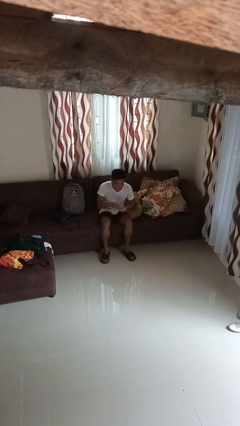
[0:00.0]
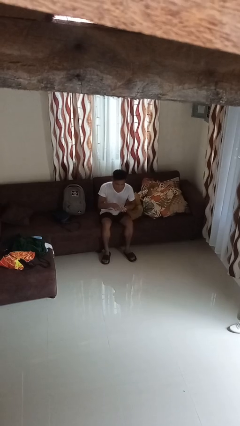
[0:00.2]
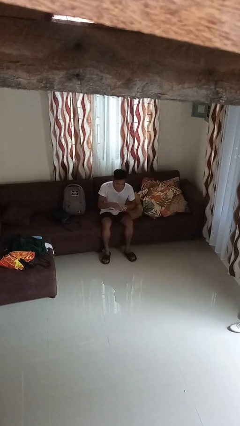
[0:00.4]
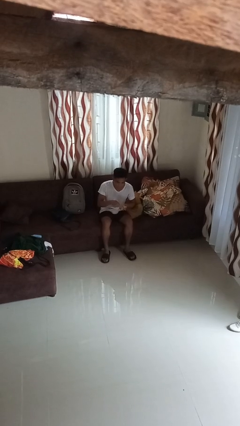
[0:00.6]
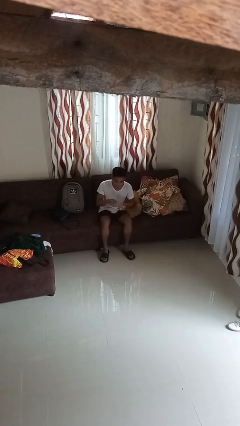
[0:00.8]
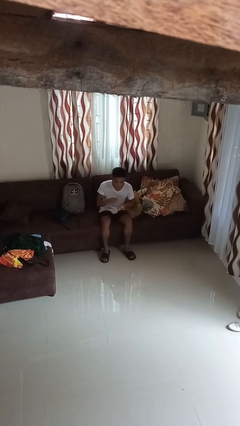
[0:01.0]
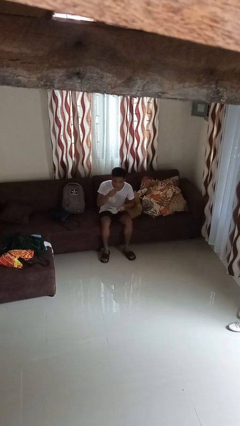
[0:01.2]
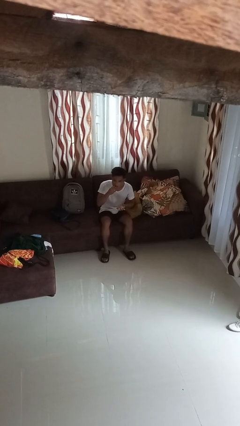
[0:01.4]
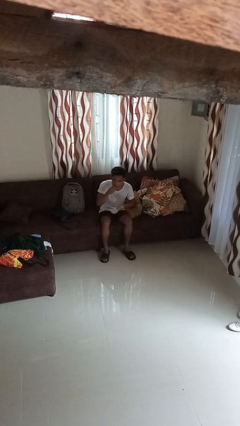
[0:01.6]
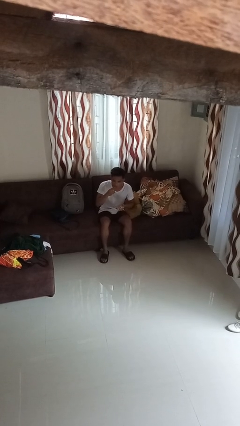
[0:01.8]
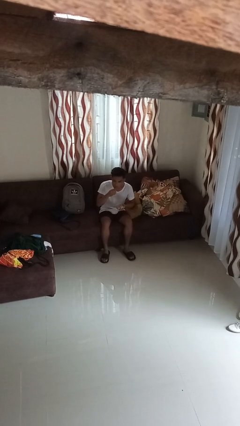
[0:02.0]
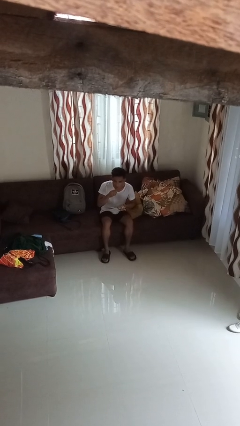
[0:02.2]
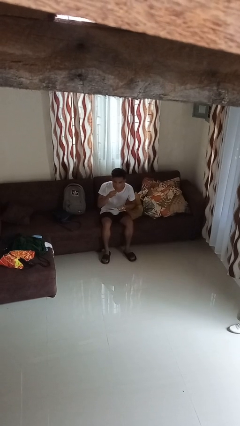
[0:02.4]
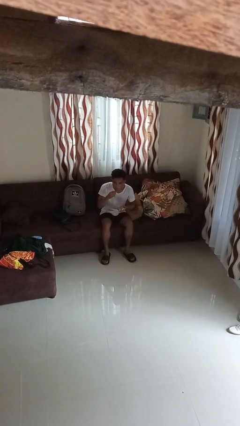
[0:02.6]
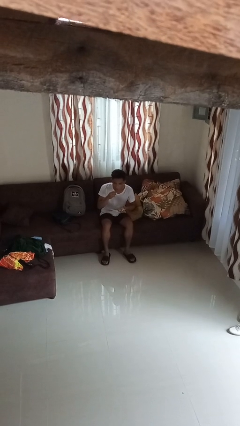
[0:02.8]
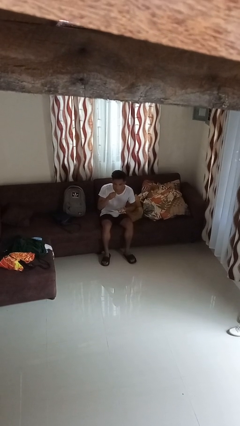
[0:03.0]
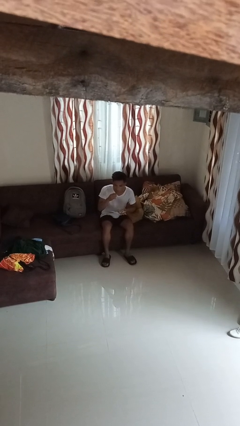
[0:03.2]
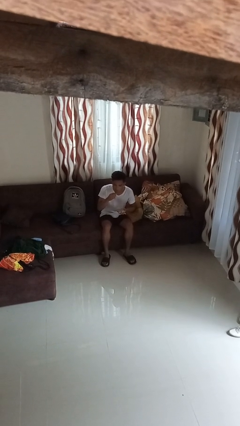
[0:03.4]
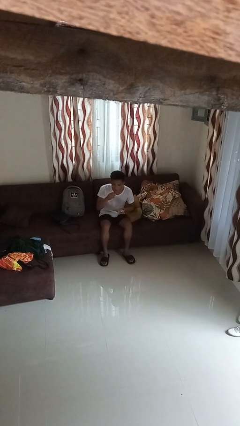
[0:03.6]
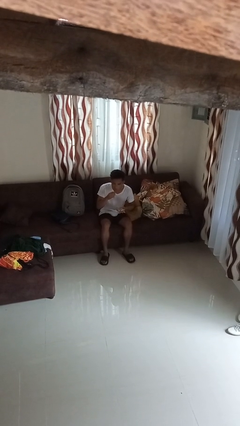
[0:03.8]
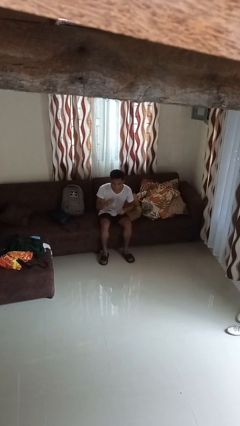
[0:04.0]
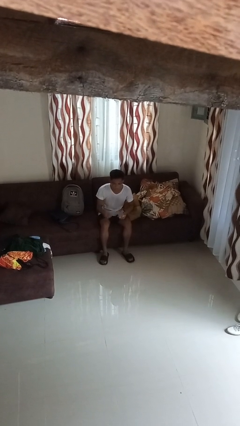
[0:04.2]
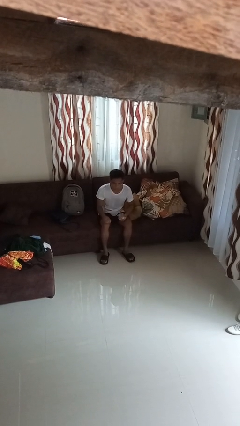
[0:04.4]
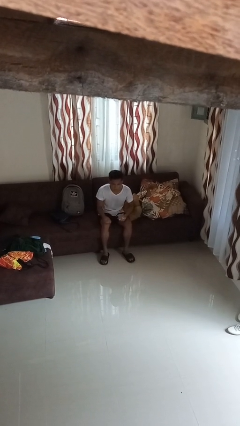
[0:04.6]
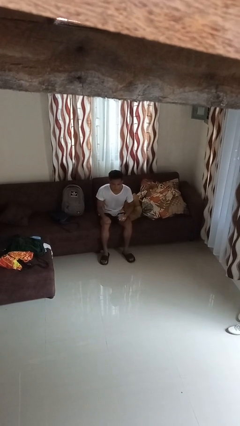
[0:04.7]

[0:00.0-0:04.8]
person eats snack from bag

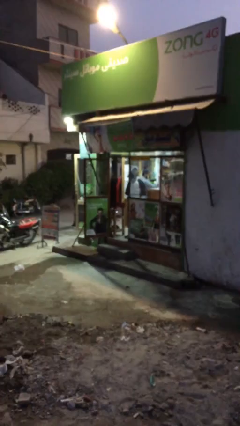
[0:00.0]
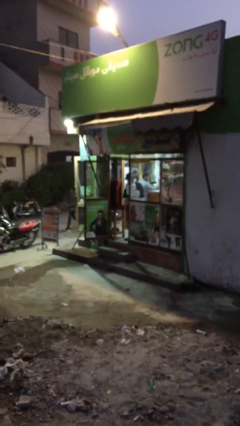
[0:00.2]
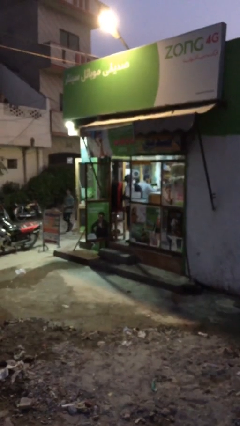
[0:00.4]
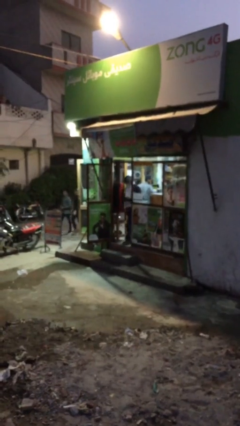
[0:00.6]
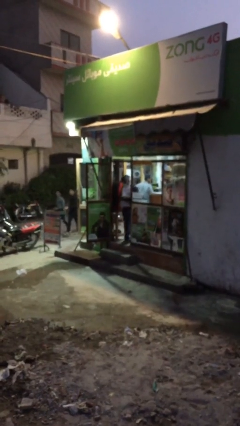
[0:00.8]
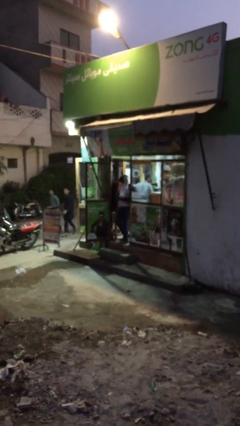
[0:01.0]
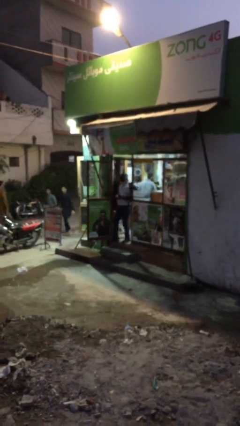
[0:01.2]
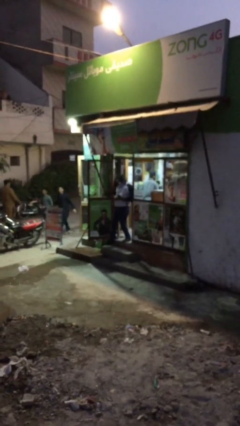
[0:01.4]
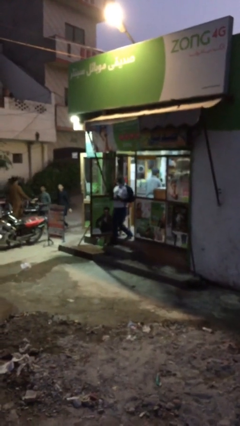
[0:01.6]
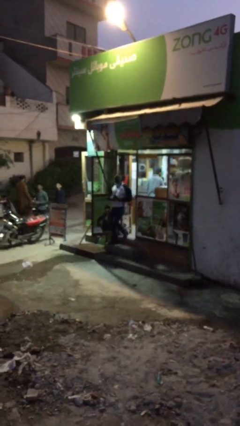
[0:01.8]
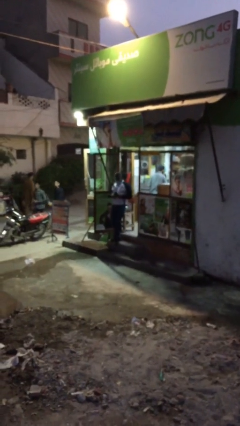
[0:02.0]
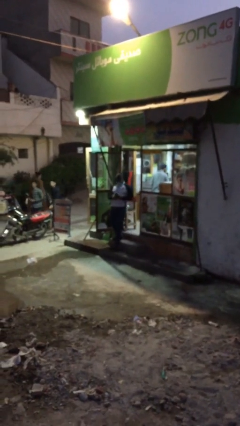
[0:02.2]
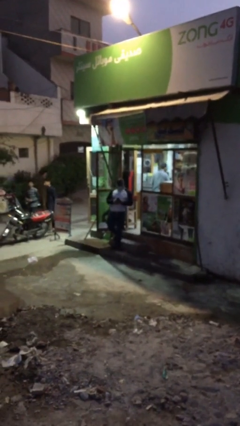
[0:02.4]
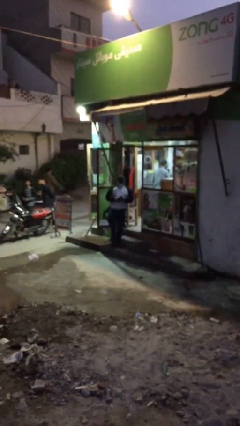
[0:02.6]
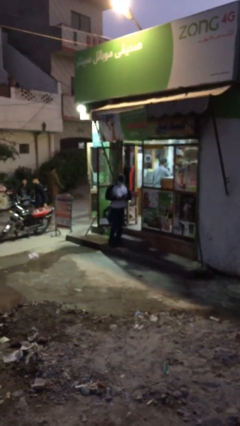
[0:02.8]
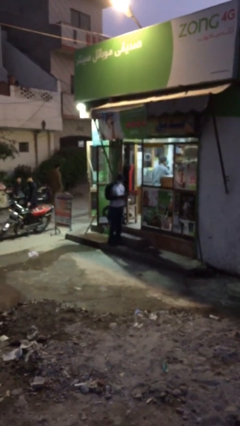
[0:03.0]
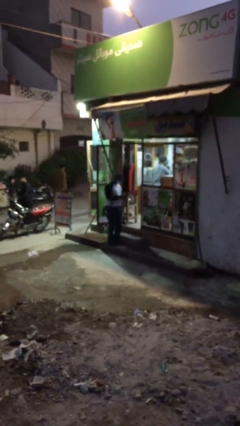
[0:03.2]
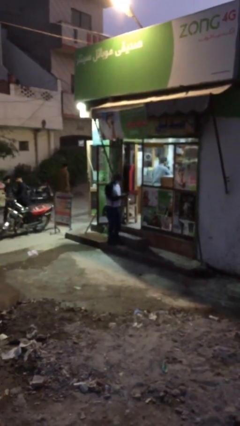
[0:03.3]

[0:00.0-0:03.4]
person exits scene through structure

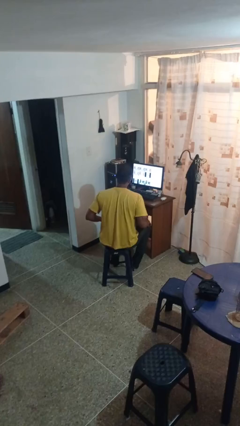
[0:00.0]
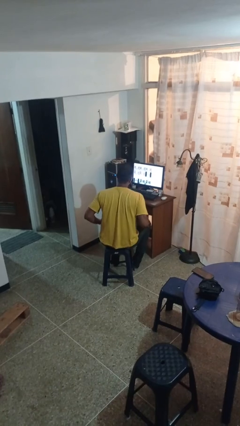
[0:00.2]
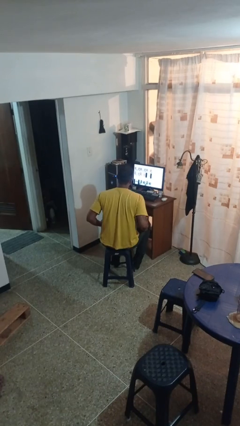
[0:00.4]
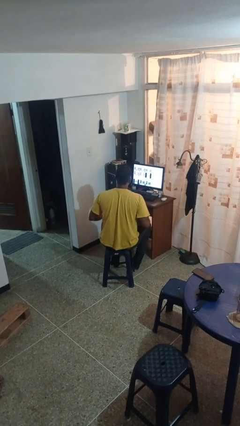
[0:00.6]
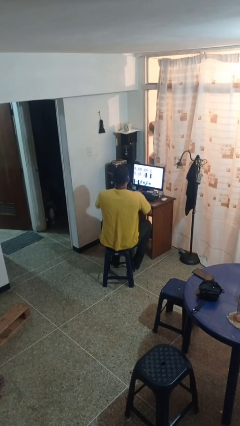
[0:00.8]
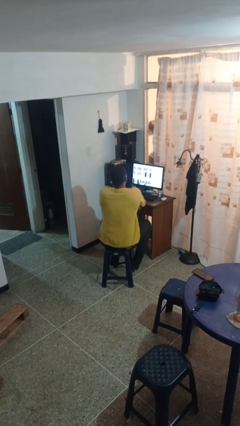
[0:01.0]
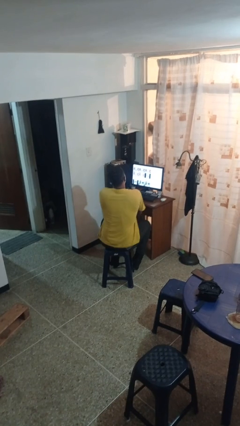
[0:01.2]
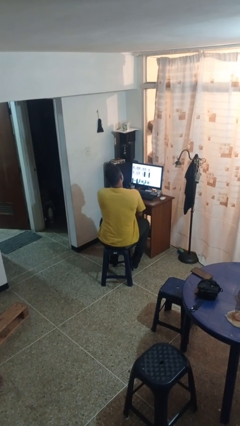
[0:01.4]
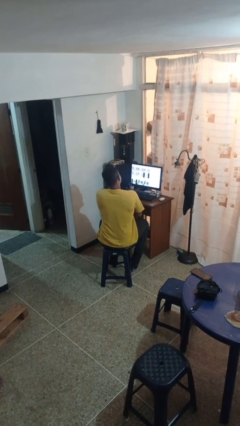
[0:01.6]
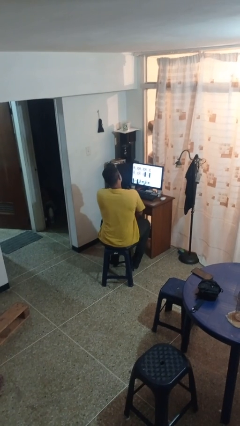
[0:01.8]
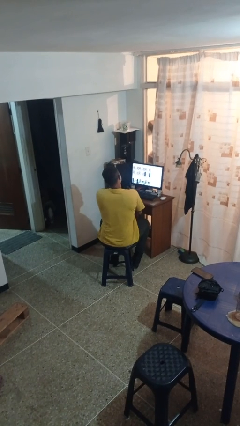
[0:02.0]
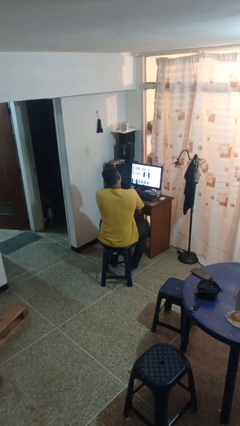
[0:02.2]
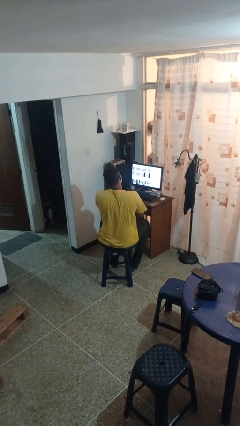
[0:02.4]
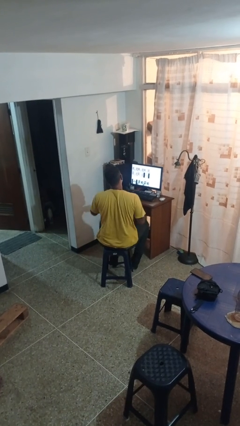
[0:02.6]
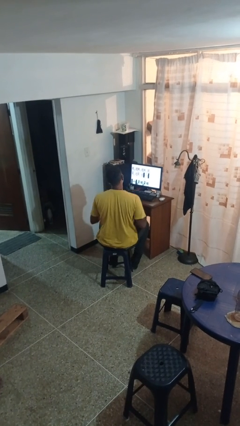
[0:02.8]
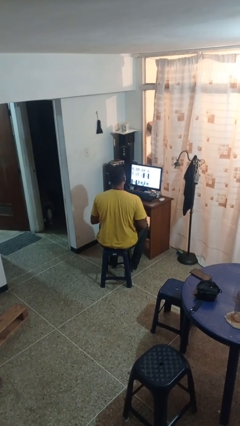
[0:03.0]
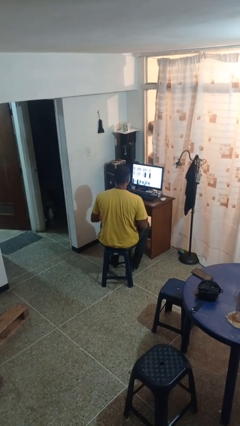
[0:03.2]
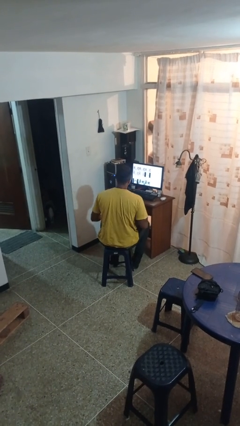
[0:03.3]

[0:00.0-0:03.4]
person crosses arms

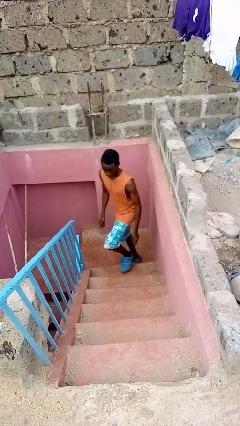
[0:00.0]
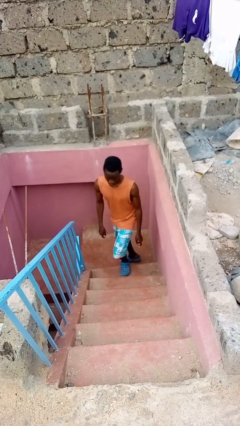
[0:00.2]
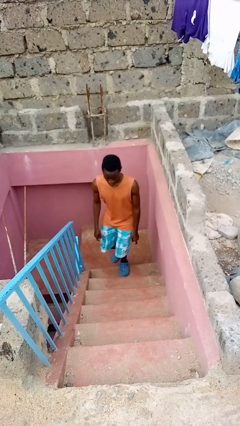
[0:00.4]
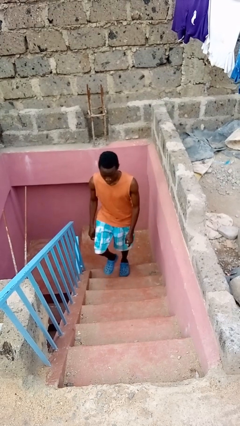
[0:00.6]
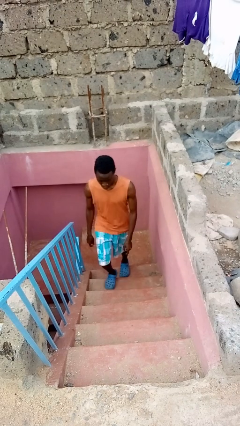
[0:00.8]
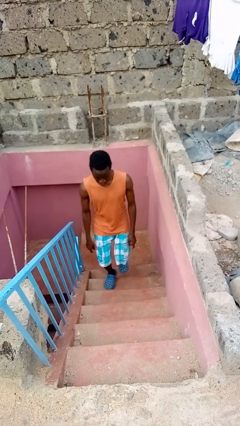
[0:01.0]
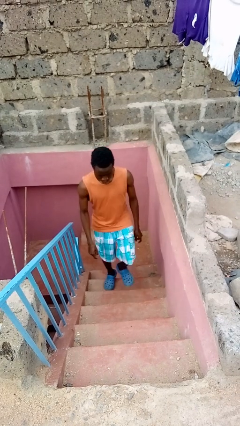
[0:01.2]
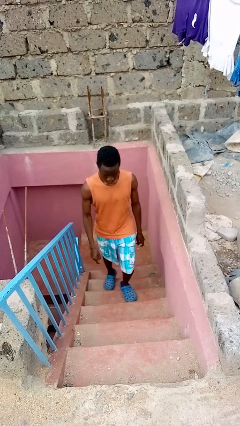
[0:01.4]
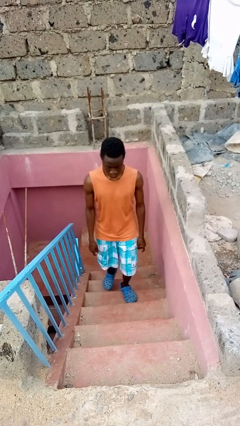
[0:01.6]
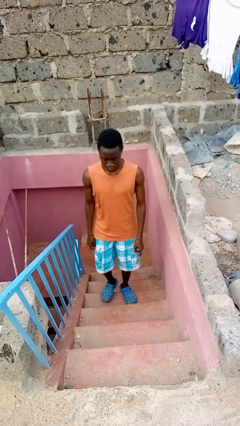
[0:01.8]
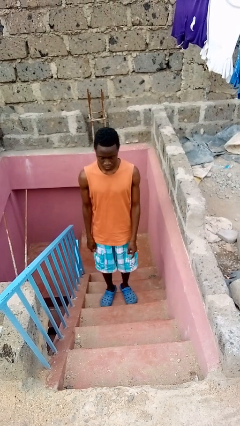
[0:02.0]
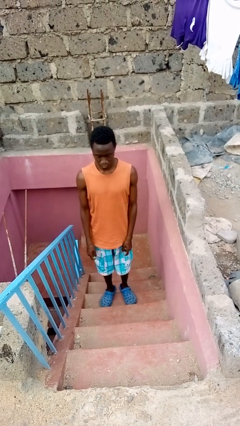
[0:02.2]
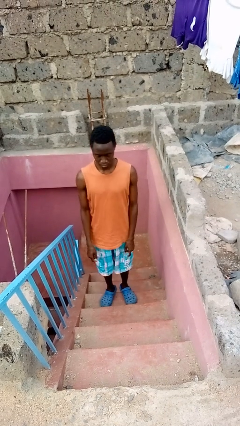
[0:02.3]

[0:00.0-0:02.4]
person climbs up stairs

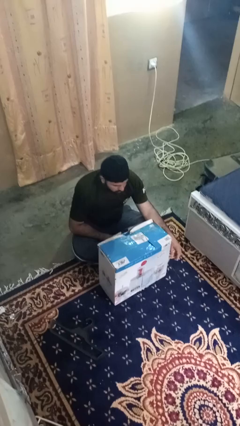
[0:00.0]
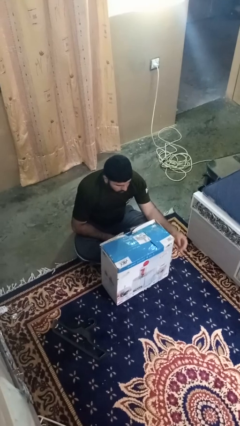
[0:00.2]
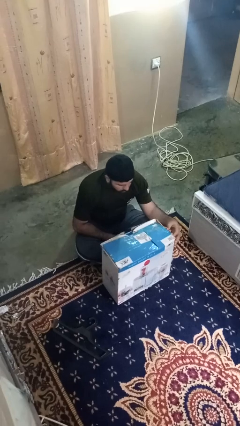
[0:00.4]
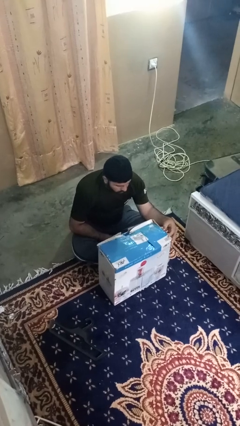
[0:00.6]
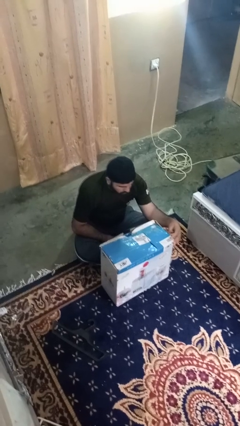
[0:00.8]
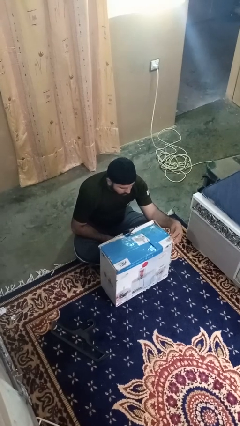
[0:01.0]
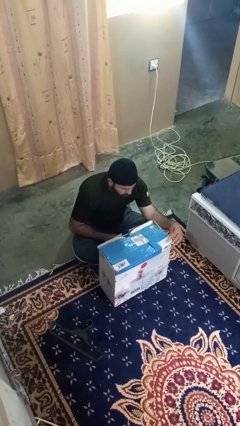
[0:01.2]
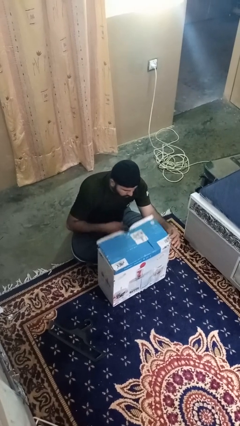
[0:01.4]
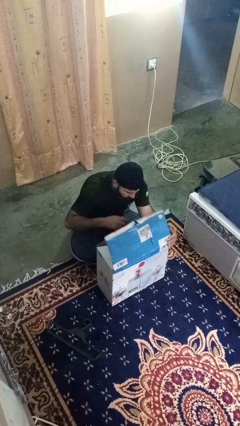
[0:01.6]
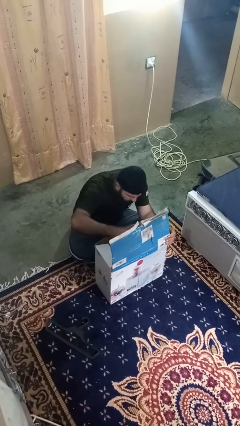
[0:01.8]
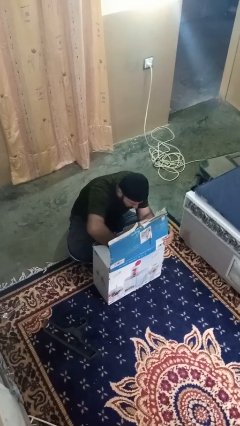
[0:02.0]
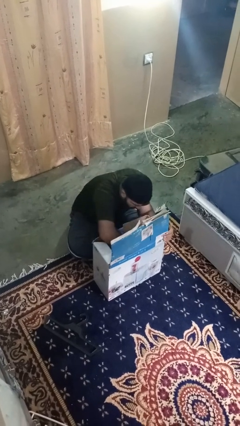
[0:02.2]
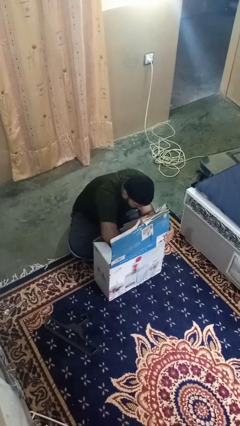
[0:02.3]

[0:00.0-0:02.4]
person searches in box

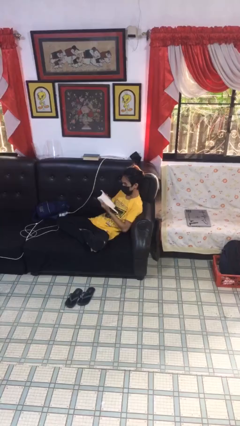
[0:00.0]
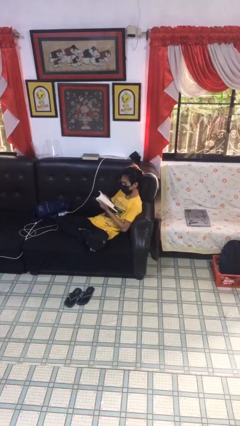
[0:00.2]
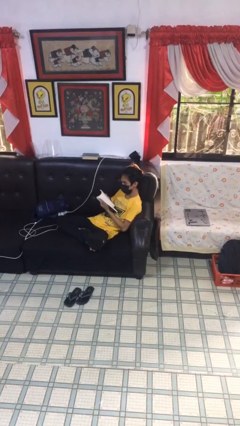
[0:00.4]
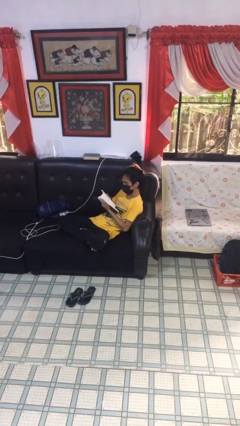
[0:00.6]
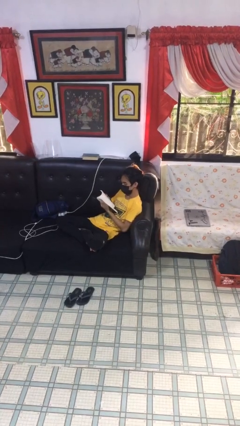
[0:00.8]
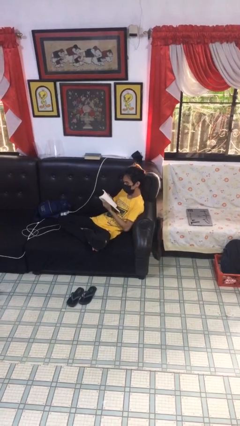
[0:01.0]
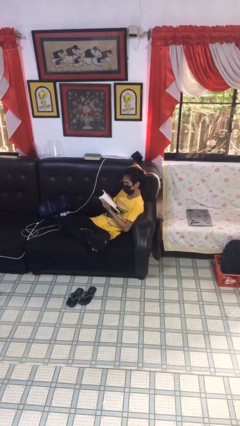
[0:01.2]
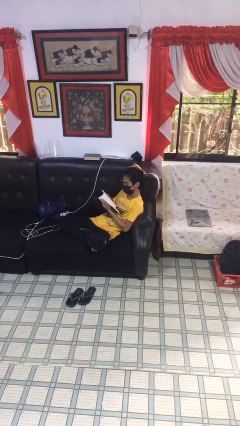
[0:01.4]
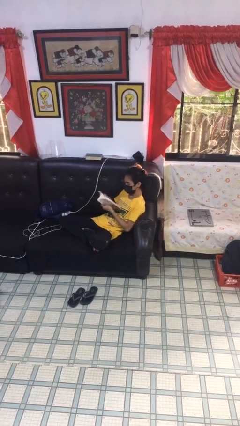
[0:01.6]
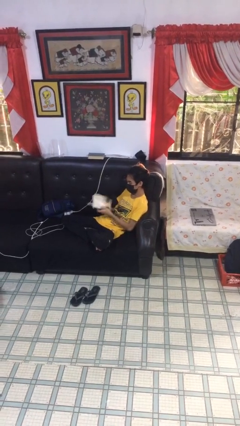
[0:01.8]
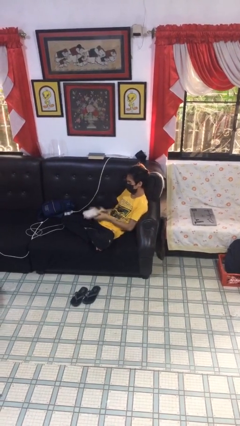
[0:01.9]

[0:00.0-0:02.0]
person reads document
